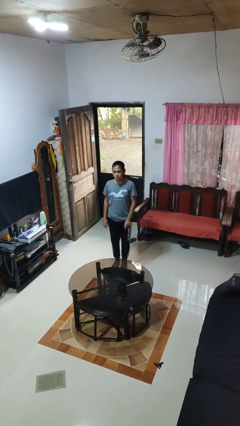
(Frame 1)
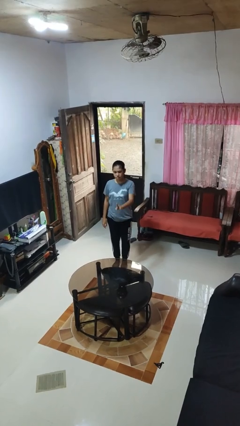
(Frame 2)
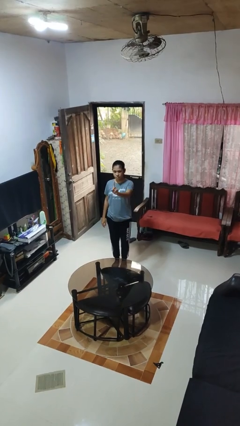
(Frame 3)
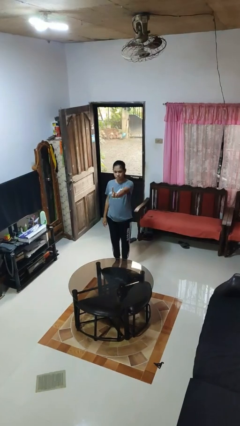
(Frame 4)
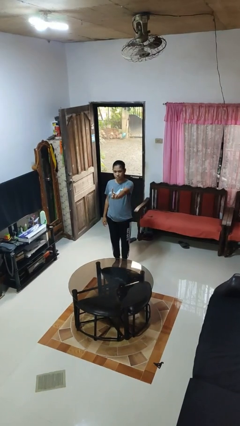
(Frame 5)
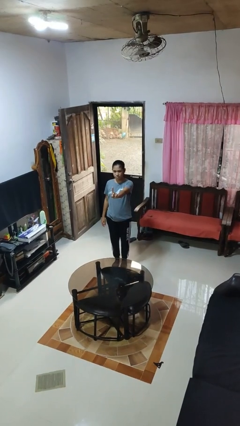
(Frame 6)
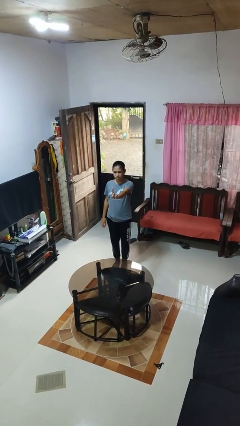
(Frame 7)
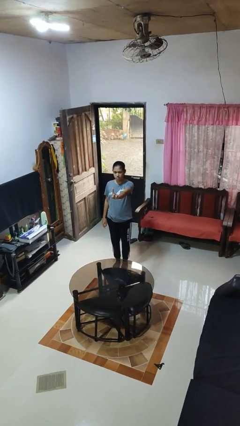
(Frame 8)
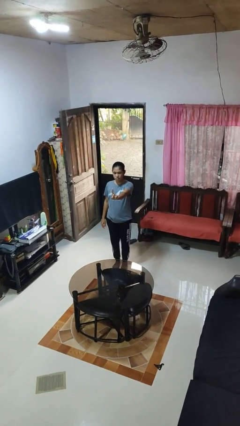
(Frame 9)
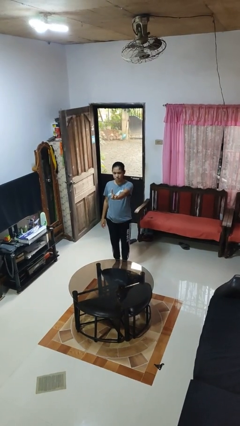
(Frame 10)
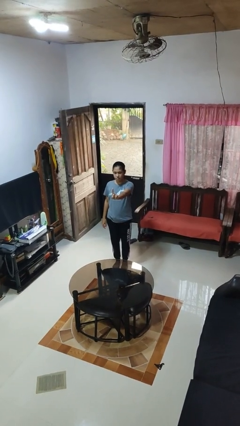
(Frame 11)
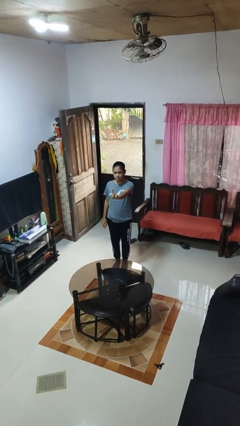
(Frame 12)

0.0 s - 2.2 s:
person gestures number one

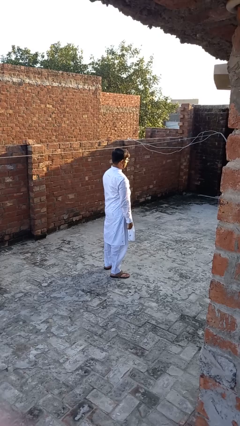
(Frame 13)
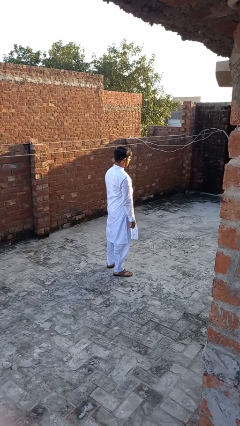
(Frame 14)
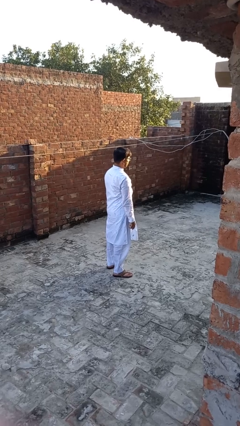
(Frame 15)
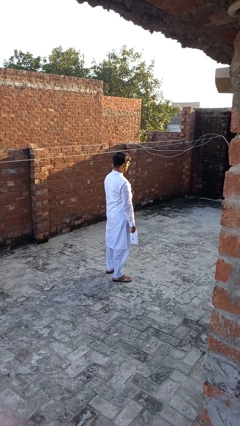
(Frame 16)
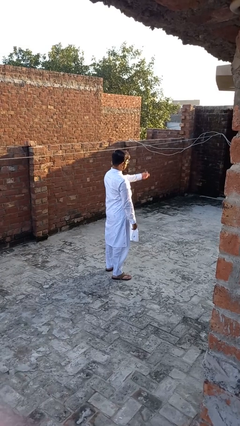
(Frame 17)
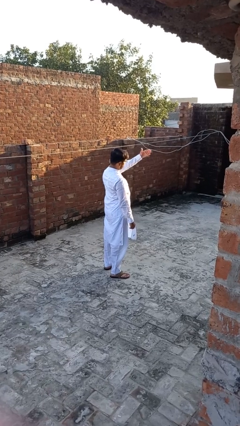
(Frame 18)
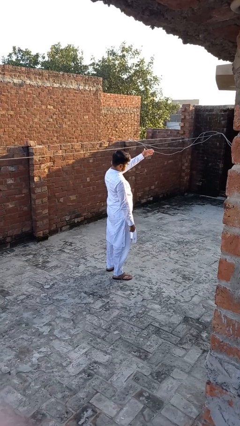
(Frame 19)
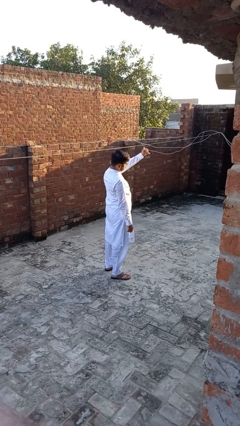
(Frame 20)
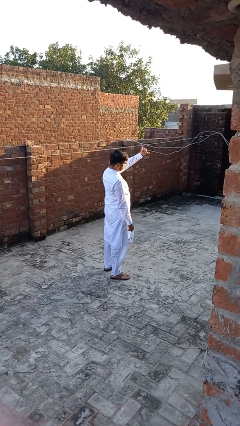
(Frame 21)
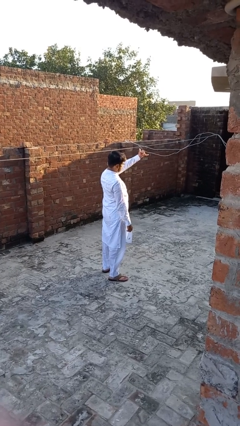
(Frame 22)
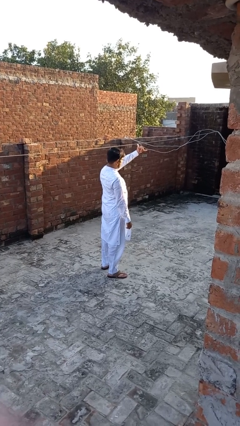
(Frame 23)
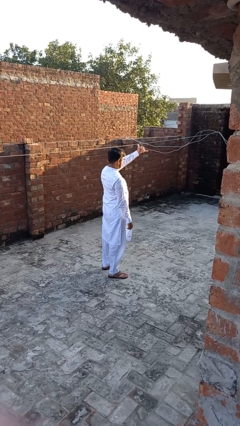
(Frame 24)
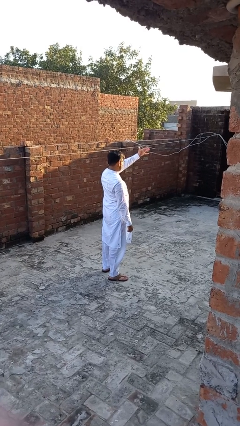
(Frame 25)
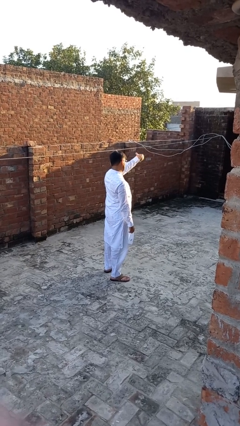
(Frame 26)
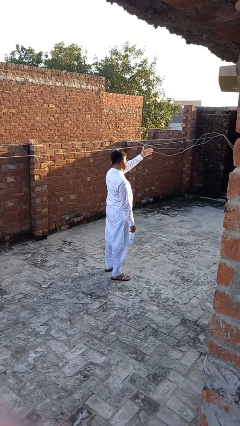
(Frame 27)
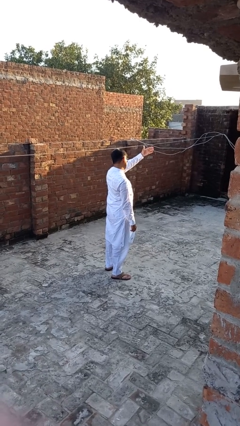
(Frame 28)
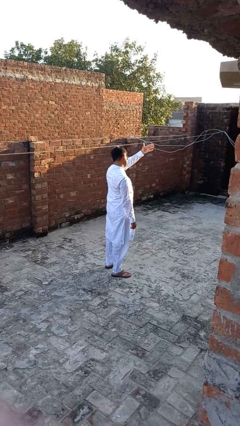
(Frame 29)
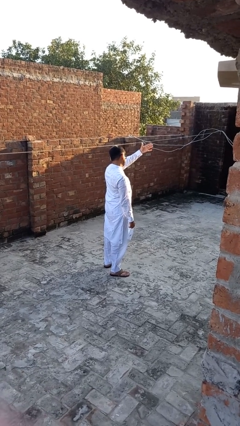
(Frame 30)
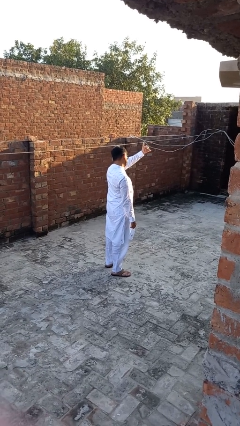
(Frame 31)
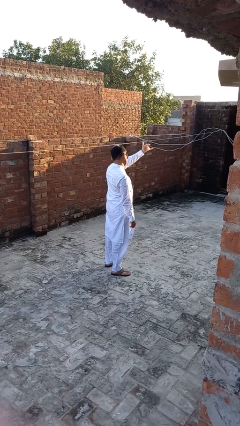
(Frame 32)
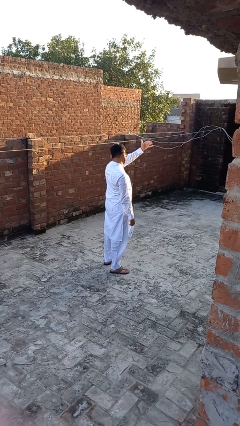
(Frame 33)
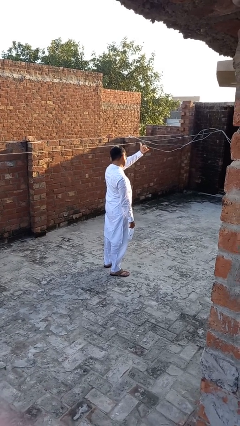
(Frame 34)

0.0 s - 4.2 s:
person gestures come here

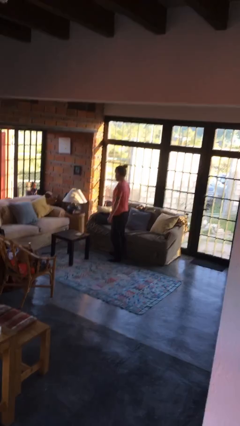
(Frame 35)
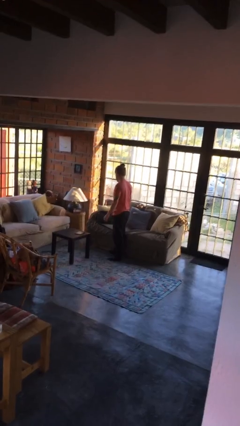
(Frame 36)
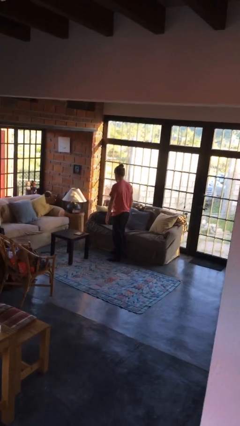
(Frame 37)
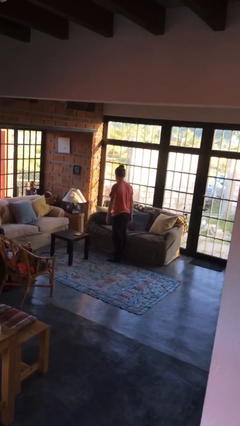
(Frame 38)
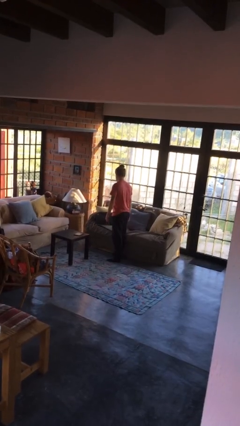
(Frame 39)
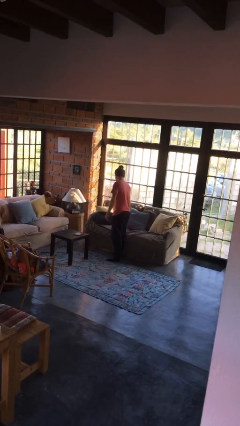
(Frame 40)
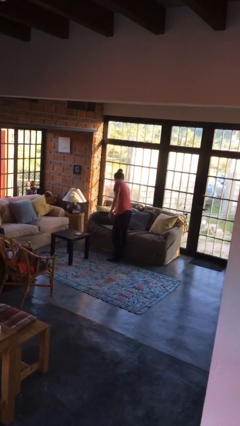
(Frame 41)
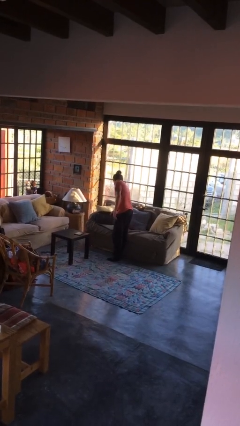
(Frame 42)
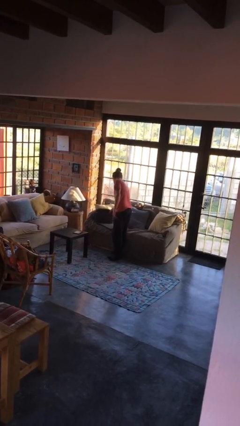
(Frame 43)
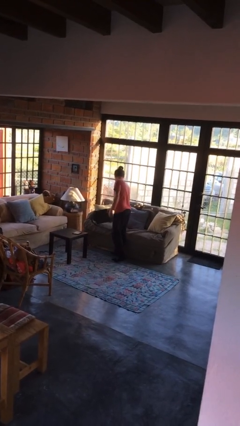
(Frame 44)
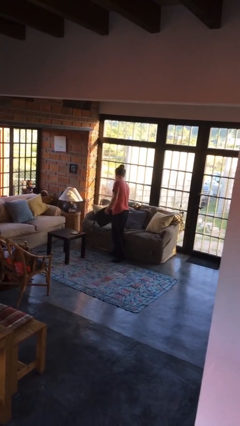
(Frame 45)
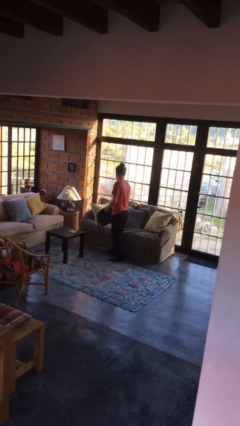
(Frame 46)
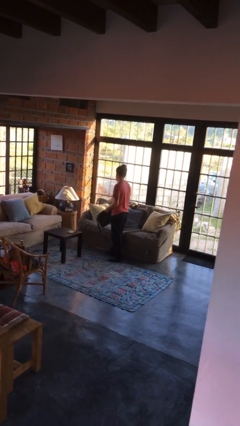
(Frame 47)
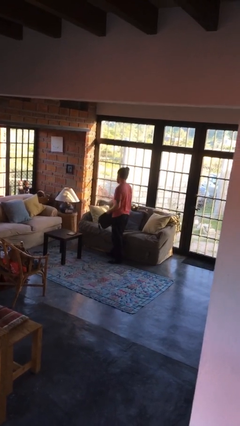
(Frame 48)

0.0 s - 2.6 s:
person picks up object from couch

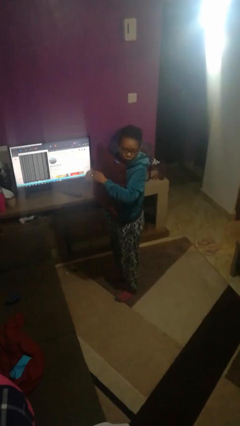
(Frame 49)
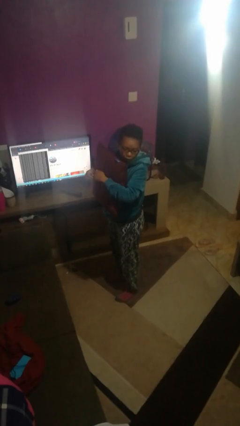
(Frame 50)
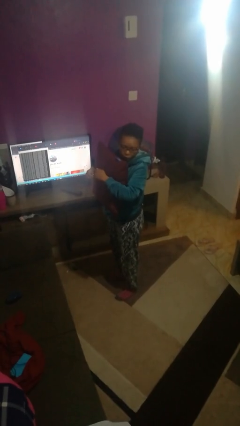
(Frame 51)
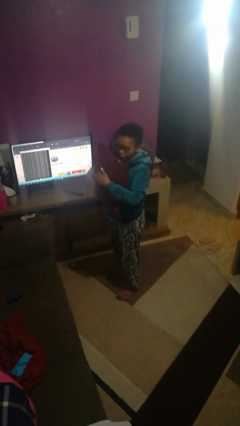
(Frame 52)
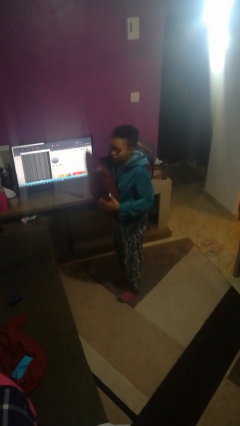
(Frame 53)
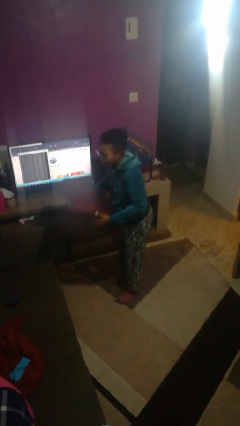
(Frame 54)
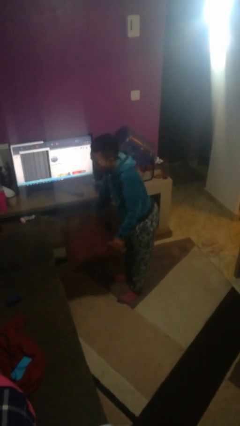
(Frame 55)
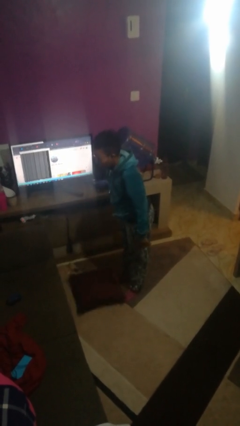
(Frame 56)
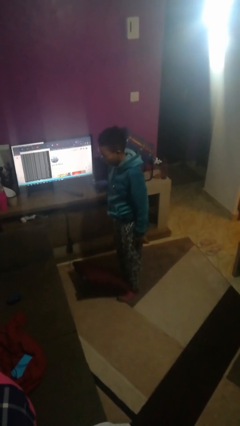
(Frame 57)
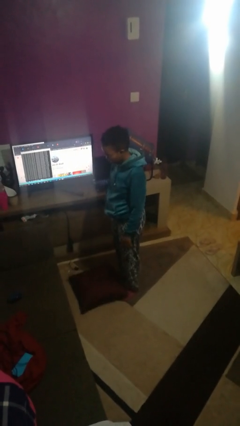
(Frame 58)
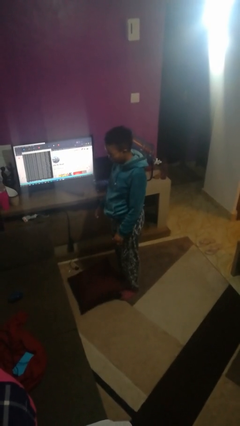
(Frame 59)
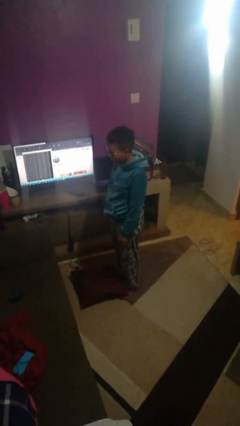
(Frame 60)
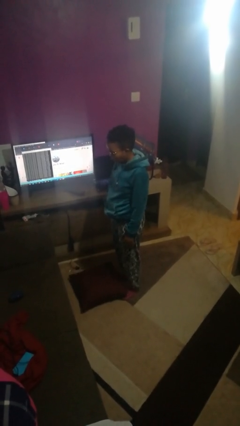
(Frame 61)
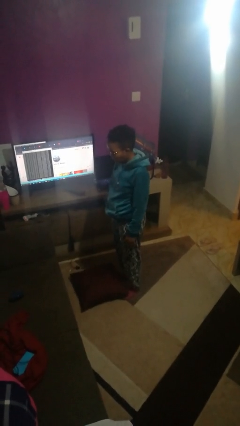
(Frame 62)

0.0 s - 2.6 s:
person throws object to ground

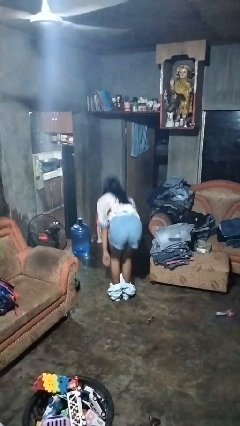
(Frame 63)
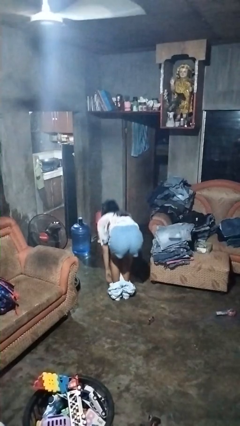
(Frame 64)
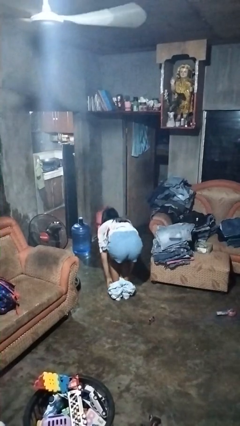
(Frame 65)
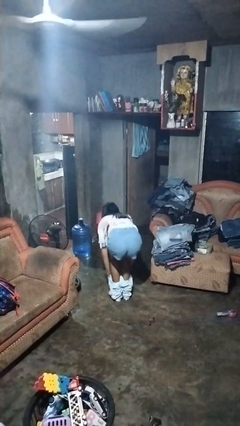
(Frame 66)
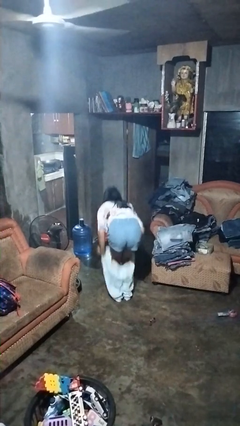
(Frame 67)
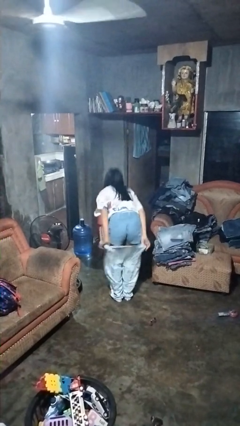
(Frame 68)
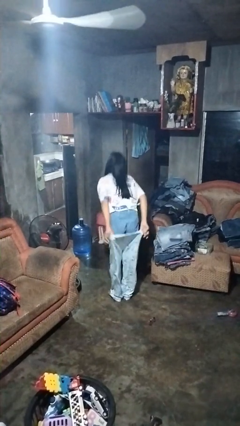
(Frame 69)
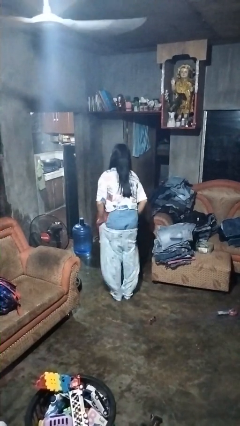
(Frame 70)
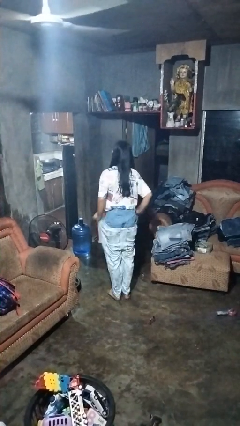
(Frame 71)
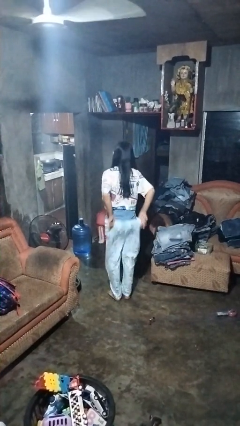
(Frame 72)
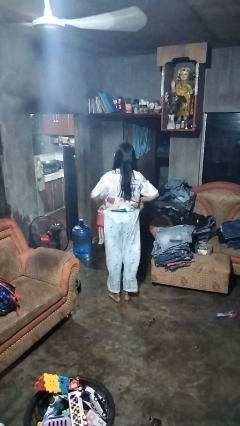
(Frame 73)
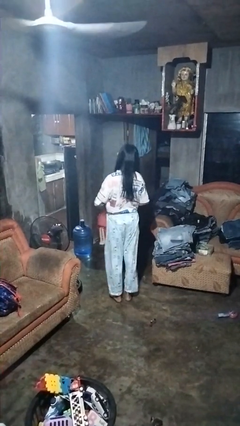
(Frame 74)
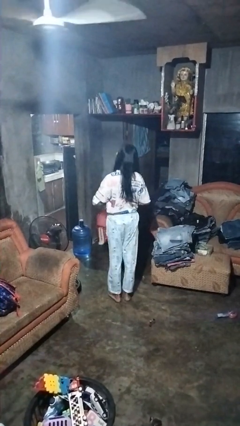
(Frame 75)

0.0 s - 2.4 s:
person puts on pants

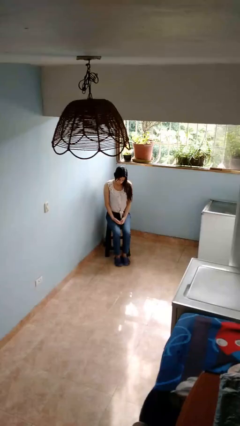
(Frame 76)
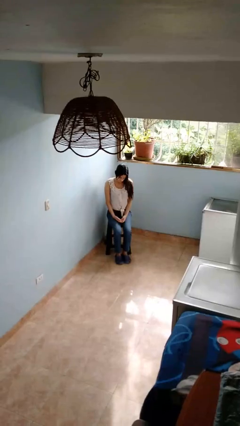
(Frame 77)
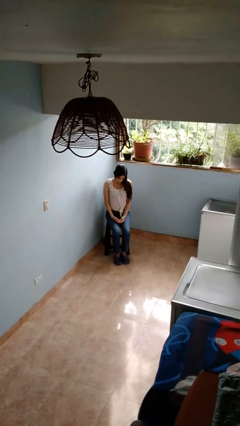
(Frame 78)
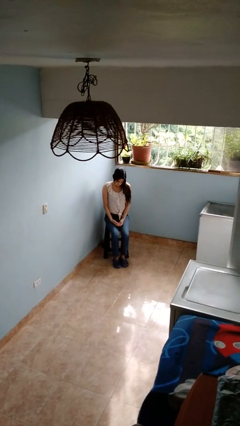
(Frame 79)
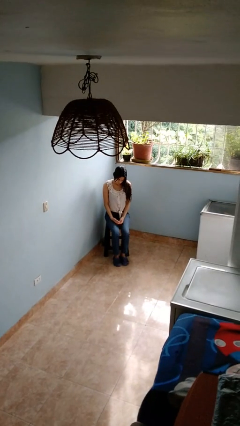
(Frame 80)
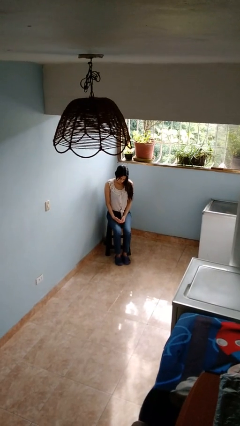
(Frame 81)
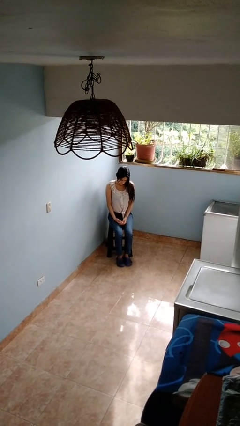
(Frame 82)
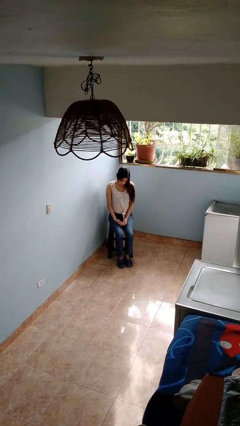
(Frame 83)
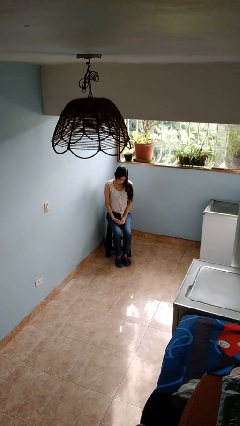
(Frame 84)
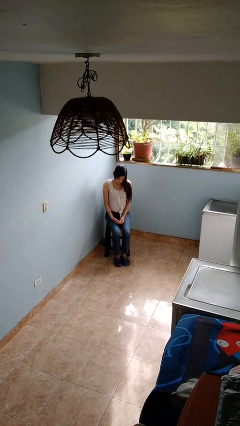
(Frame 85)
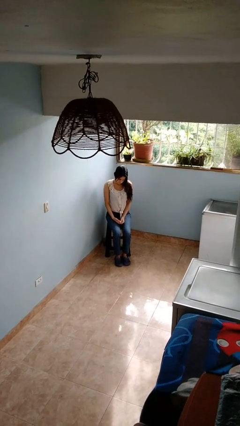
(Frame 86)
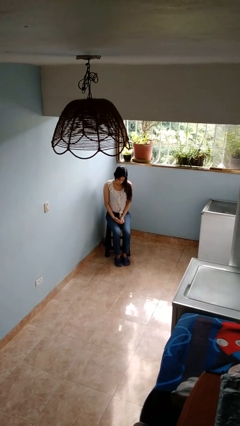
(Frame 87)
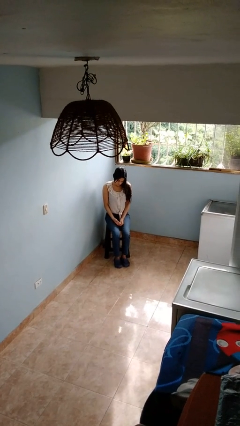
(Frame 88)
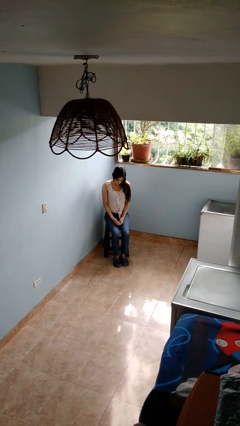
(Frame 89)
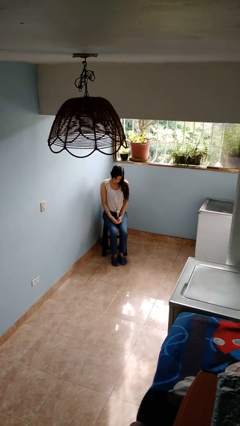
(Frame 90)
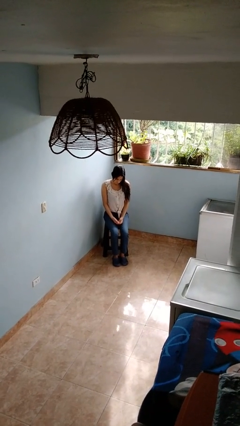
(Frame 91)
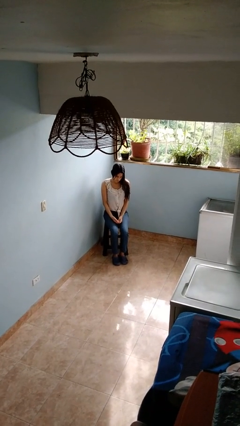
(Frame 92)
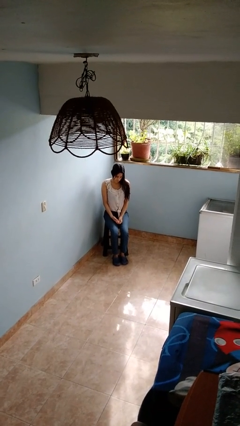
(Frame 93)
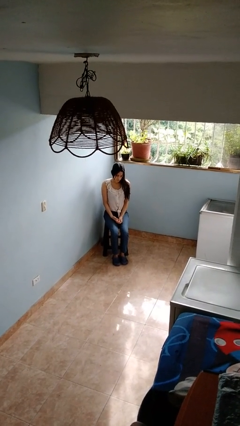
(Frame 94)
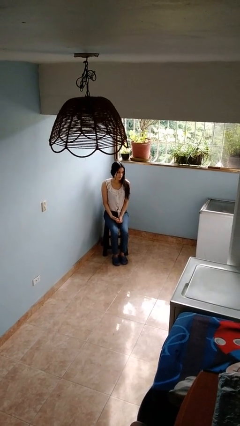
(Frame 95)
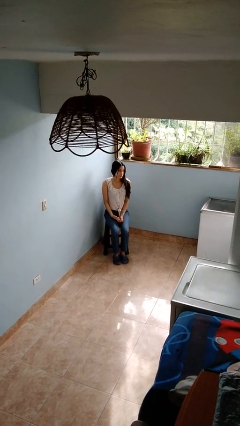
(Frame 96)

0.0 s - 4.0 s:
person looks at hands in lap
